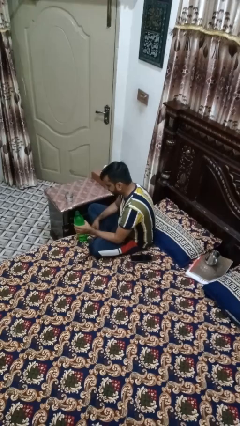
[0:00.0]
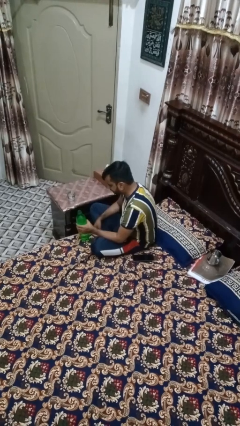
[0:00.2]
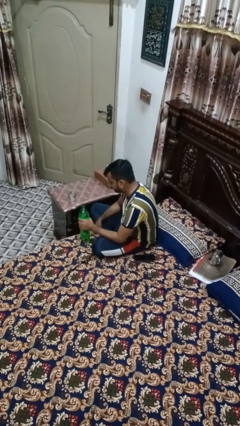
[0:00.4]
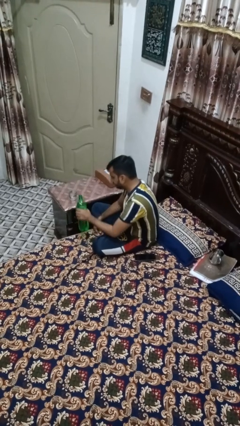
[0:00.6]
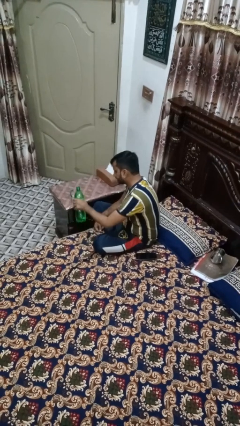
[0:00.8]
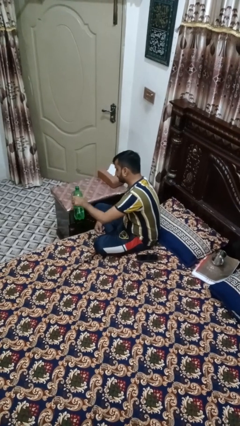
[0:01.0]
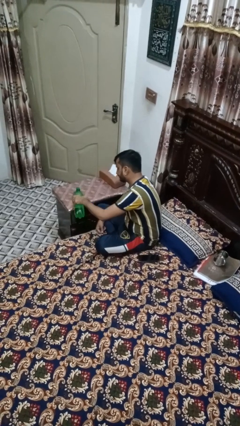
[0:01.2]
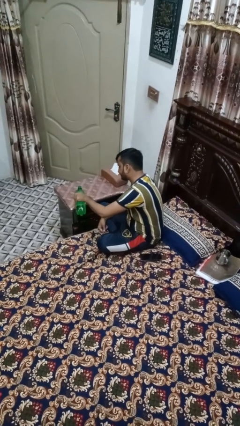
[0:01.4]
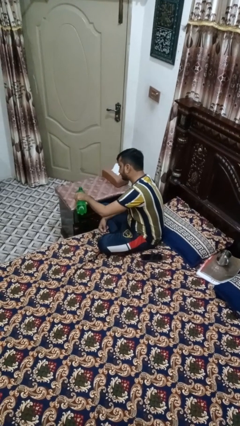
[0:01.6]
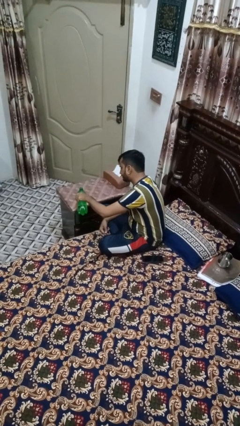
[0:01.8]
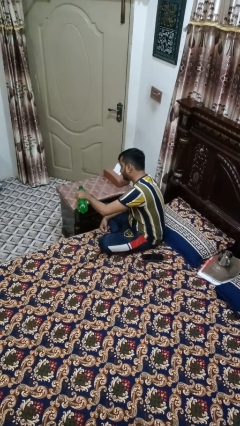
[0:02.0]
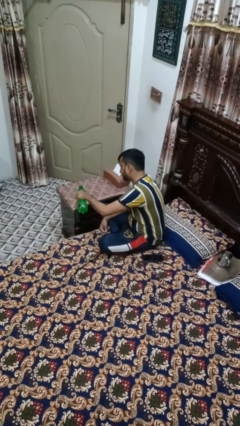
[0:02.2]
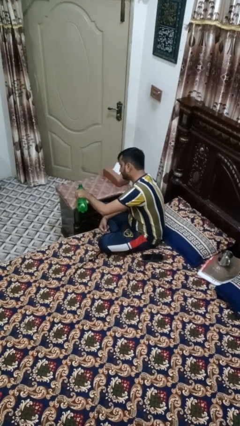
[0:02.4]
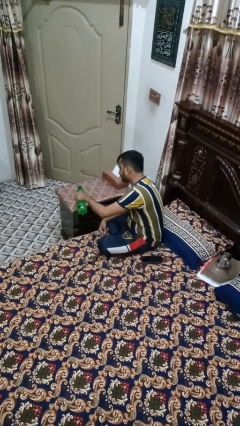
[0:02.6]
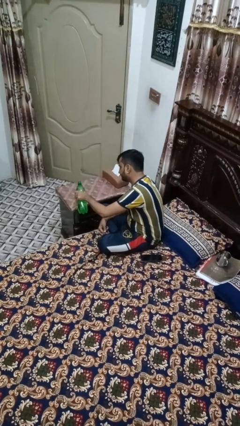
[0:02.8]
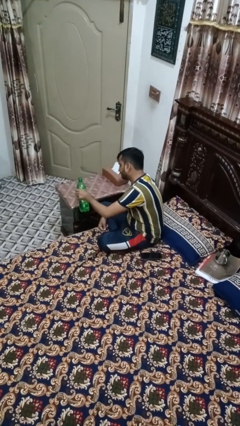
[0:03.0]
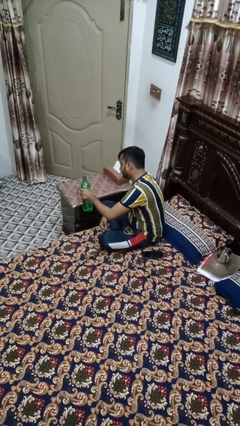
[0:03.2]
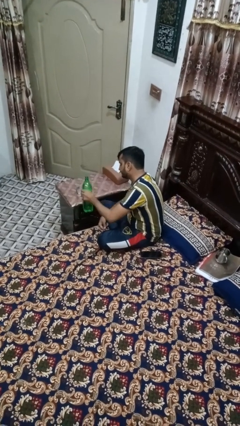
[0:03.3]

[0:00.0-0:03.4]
person pours liquid into cup

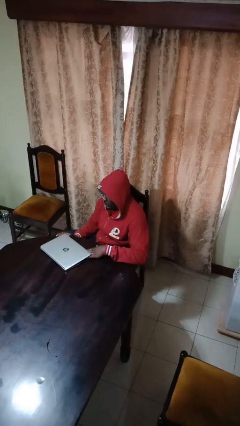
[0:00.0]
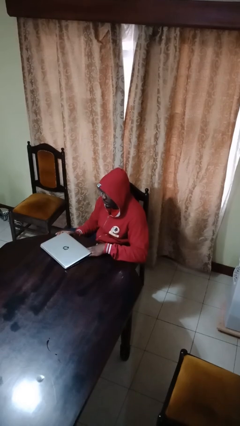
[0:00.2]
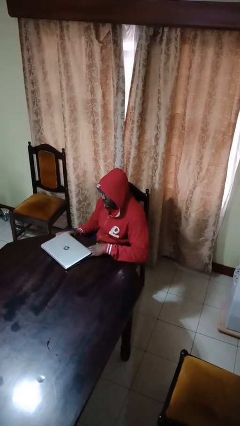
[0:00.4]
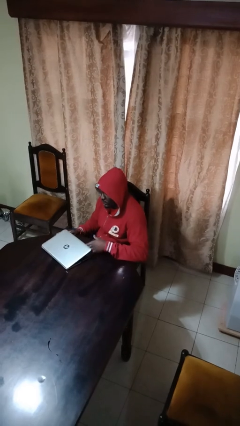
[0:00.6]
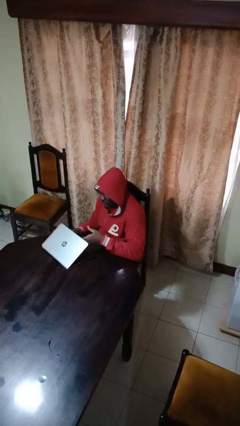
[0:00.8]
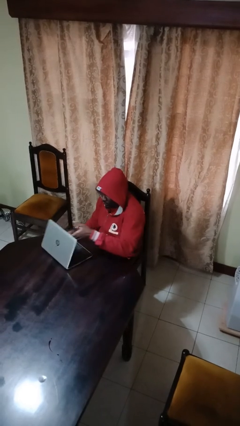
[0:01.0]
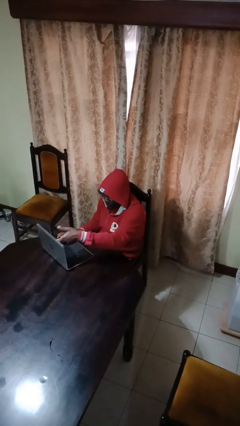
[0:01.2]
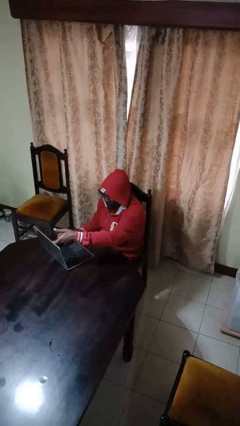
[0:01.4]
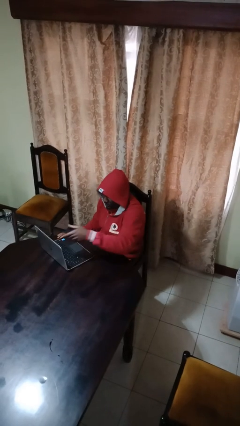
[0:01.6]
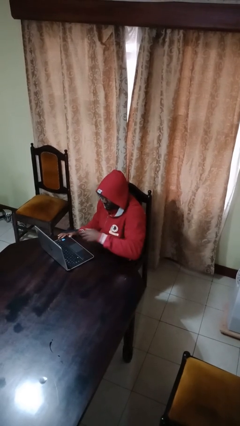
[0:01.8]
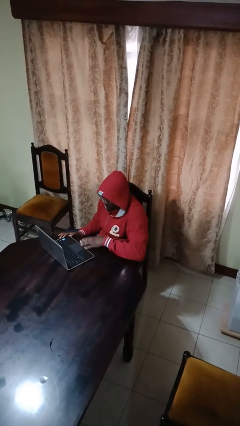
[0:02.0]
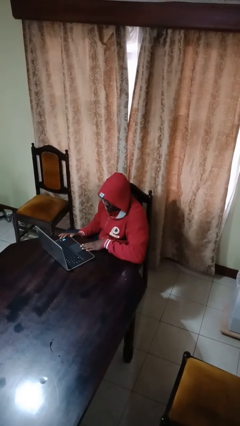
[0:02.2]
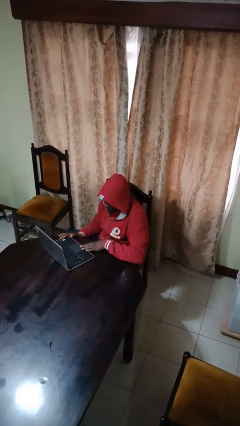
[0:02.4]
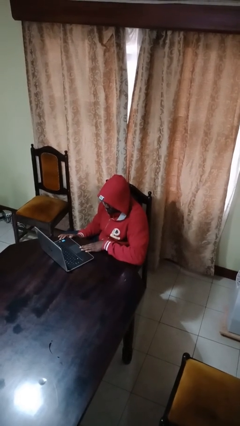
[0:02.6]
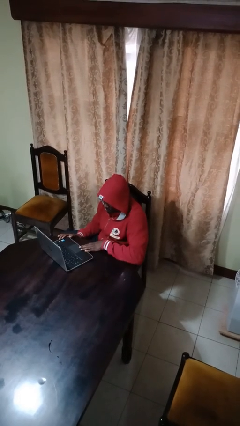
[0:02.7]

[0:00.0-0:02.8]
person opens laptop

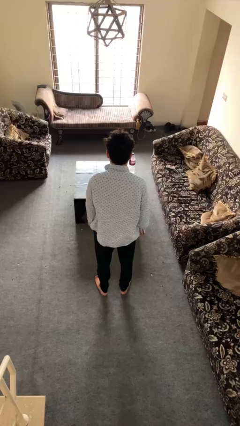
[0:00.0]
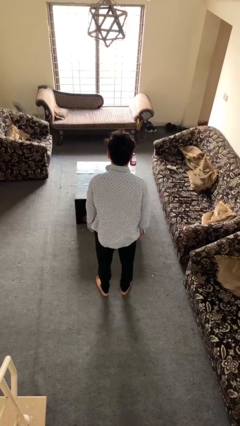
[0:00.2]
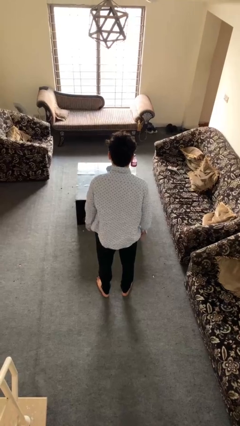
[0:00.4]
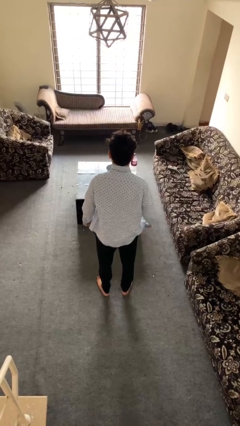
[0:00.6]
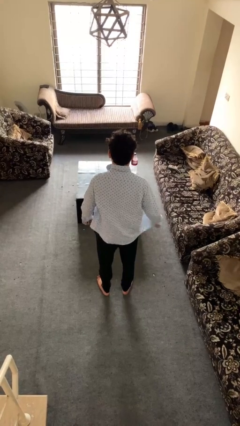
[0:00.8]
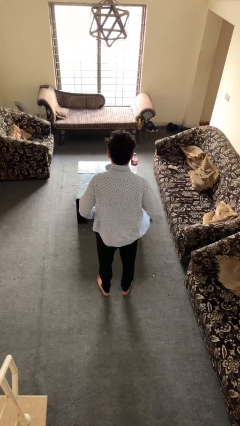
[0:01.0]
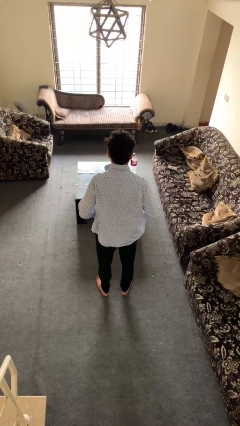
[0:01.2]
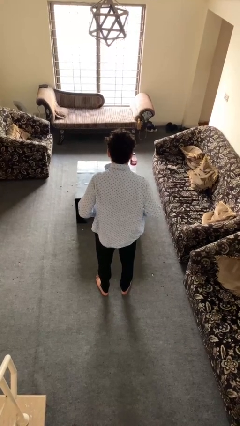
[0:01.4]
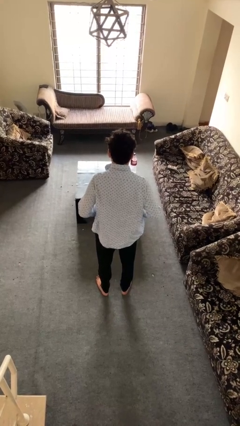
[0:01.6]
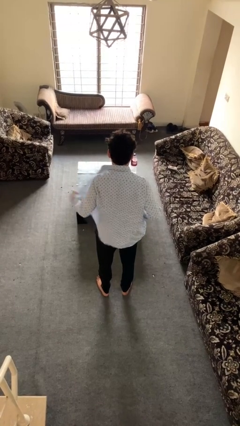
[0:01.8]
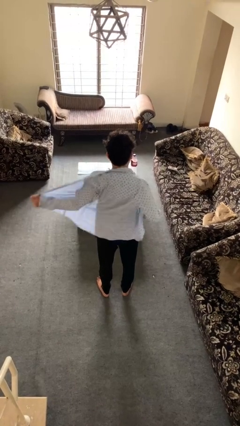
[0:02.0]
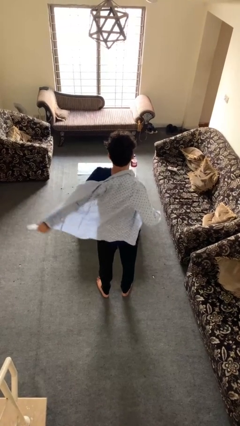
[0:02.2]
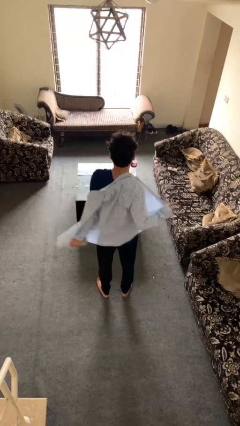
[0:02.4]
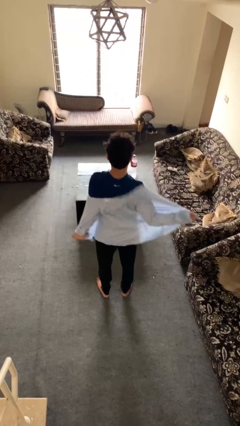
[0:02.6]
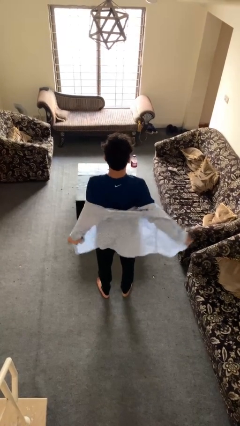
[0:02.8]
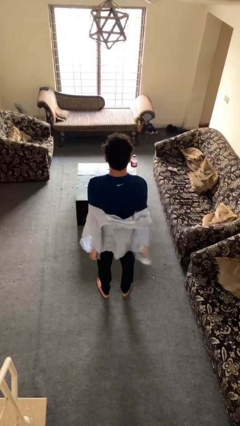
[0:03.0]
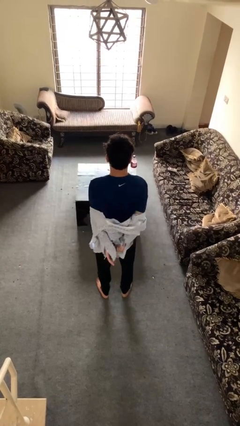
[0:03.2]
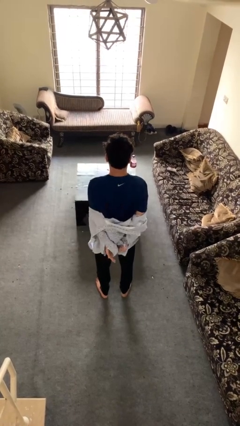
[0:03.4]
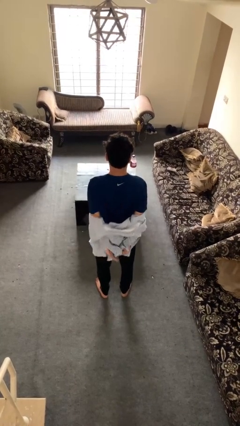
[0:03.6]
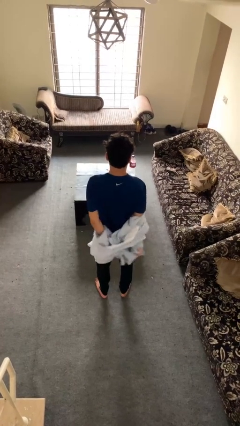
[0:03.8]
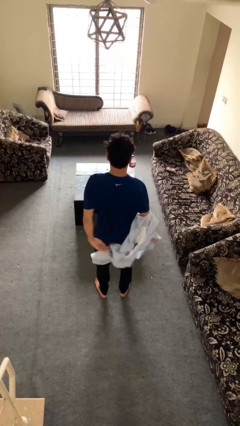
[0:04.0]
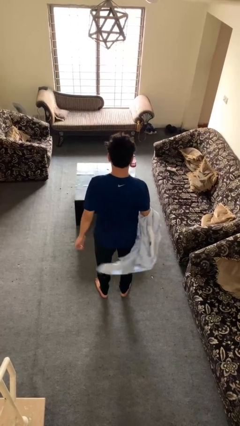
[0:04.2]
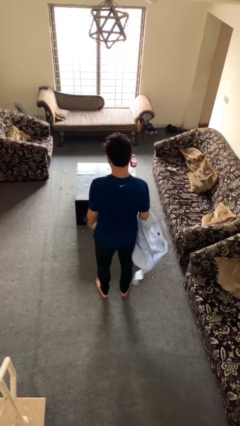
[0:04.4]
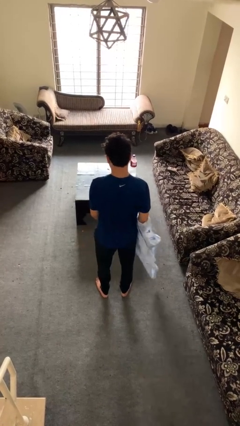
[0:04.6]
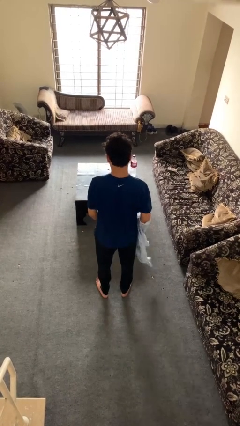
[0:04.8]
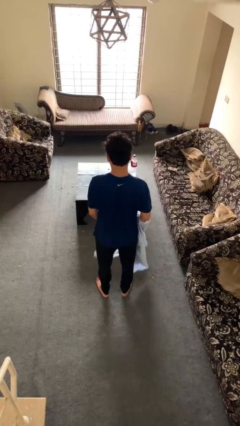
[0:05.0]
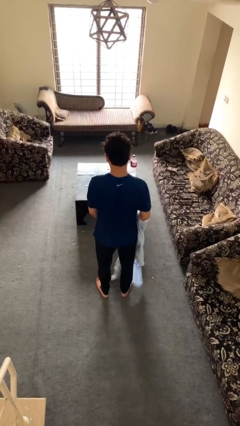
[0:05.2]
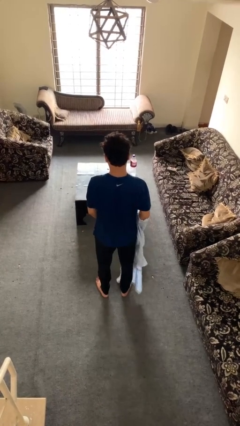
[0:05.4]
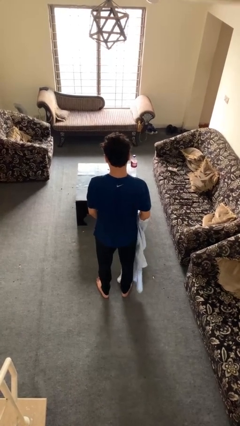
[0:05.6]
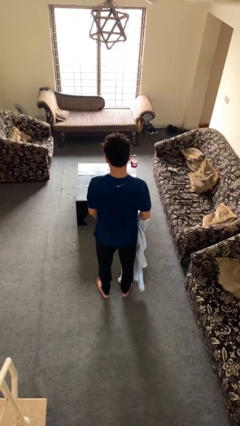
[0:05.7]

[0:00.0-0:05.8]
person takes off shirt

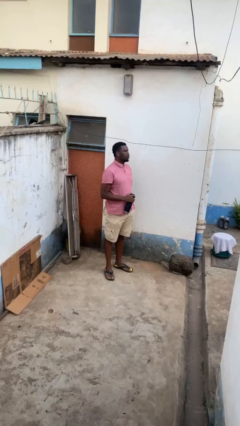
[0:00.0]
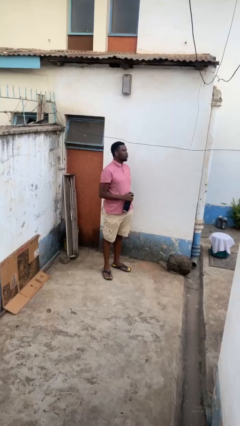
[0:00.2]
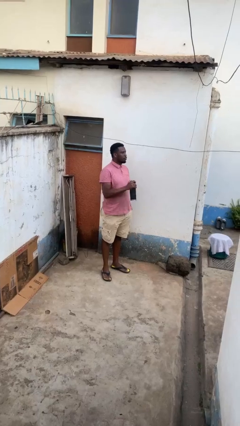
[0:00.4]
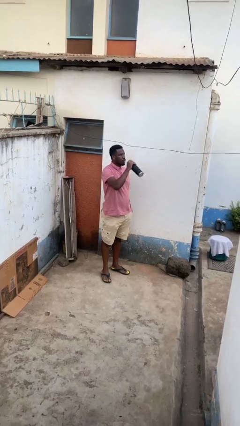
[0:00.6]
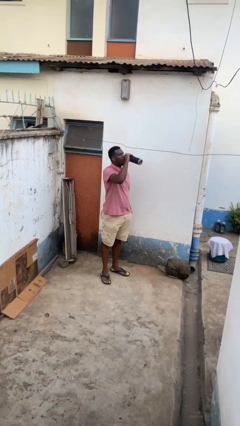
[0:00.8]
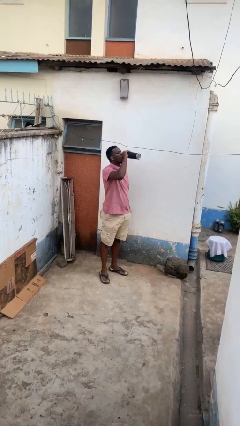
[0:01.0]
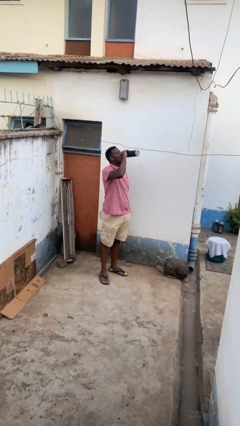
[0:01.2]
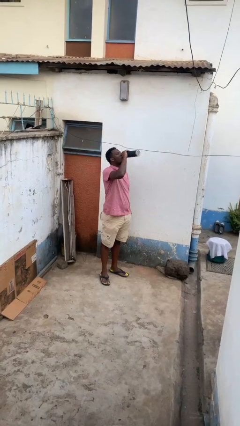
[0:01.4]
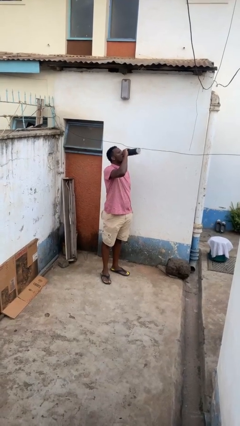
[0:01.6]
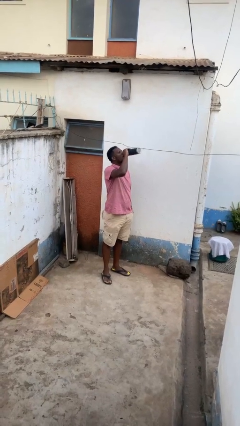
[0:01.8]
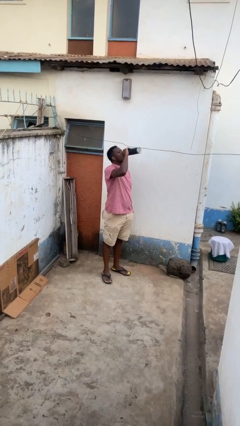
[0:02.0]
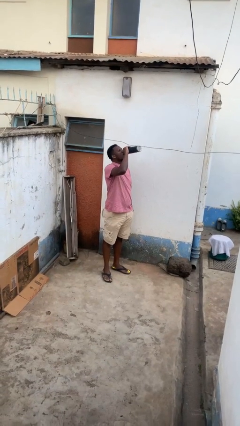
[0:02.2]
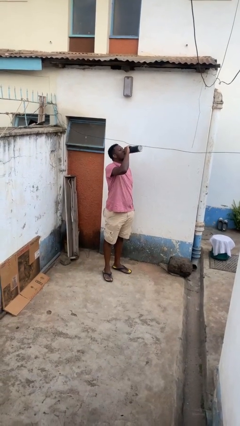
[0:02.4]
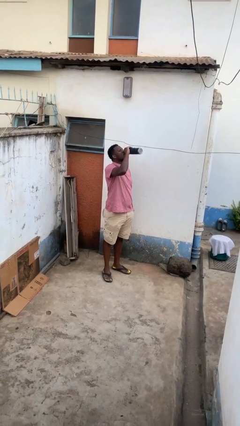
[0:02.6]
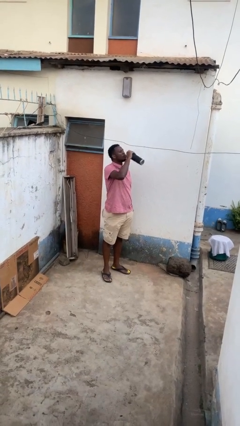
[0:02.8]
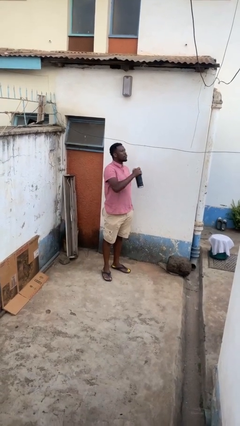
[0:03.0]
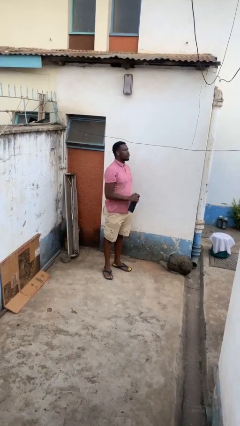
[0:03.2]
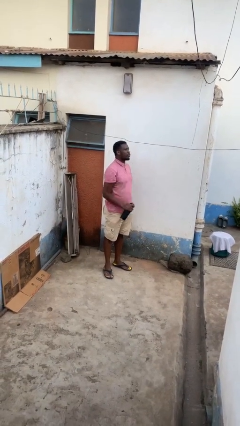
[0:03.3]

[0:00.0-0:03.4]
person drinks from bottle

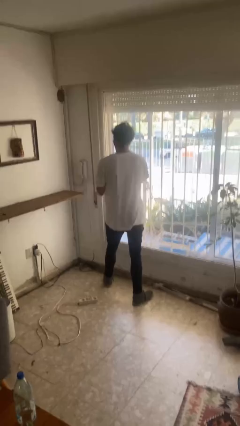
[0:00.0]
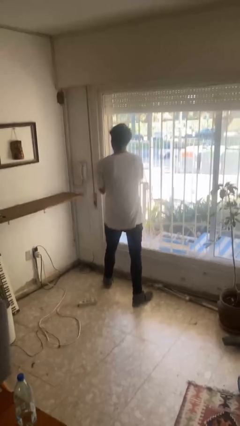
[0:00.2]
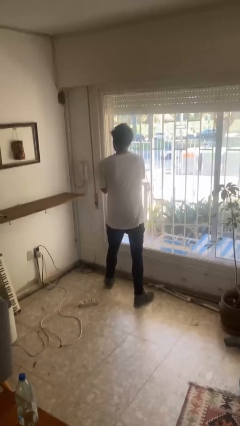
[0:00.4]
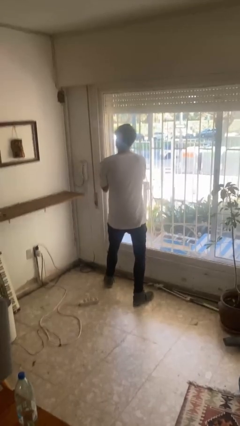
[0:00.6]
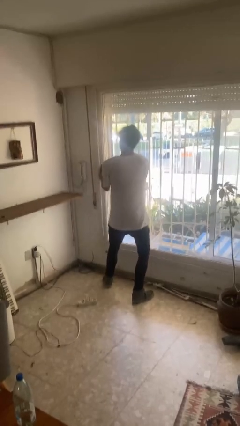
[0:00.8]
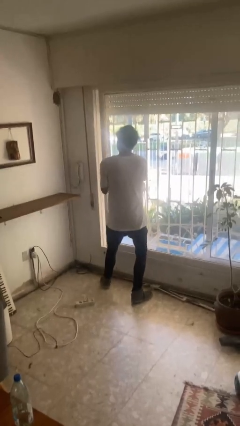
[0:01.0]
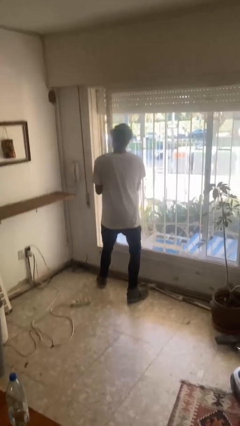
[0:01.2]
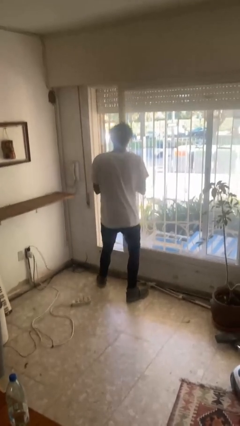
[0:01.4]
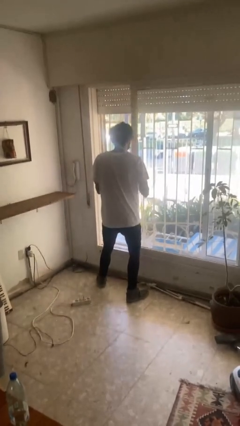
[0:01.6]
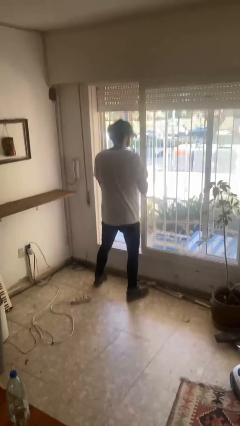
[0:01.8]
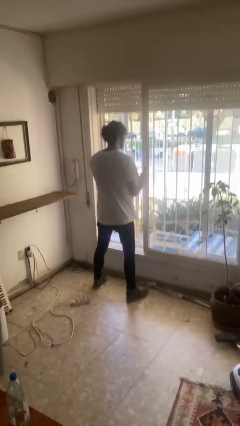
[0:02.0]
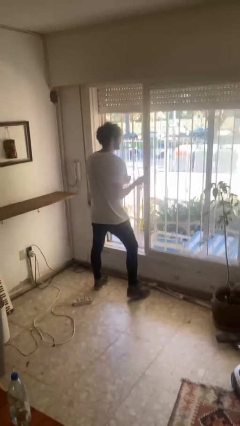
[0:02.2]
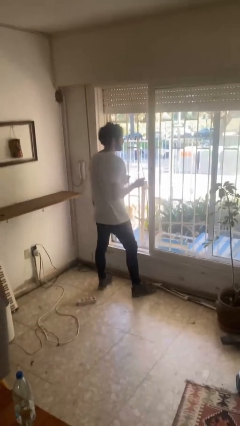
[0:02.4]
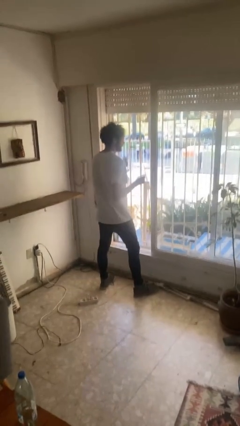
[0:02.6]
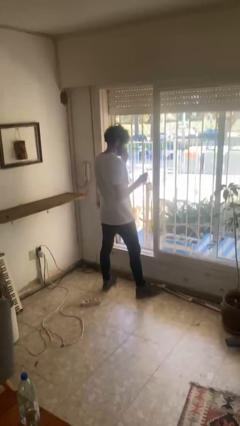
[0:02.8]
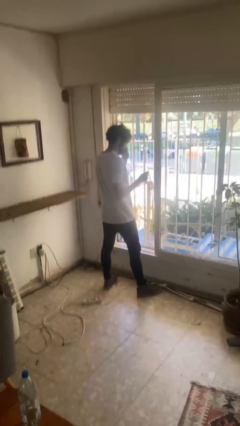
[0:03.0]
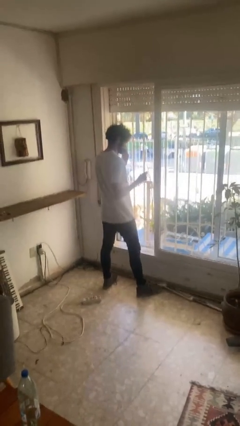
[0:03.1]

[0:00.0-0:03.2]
person opens sliding door
